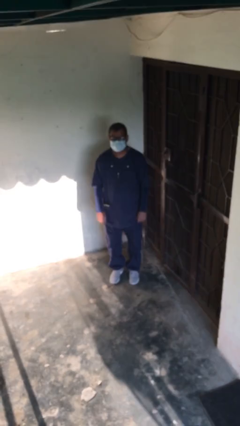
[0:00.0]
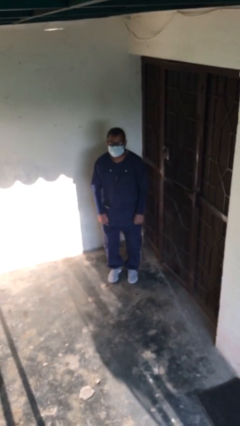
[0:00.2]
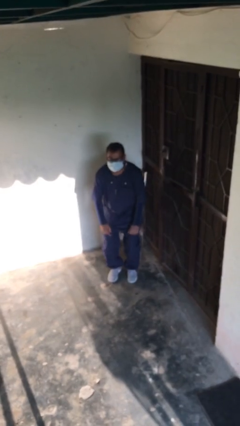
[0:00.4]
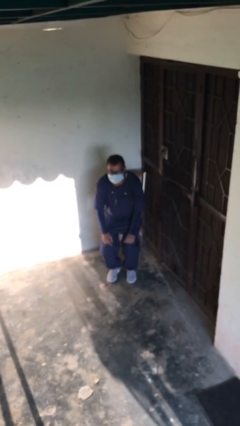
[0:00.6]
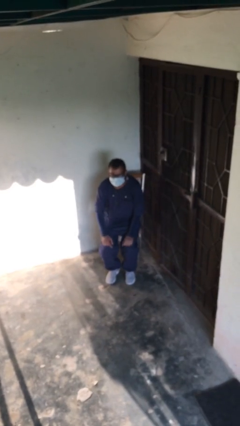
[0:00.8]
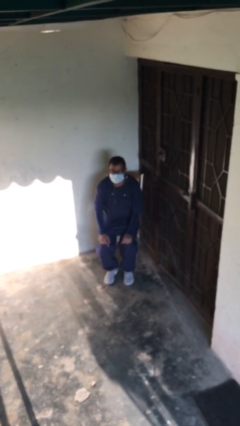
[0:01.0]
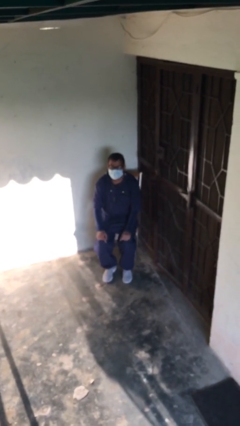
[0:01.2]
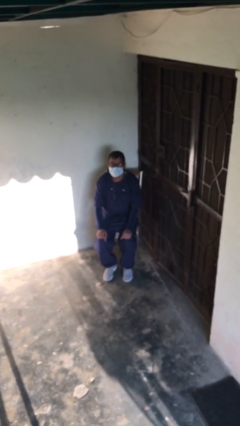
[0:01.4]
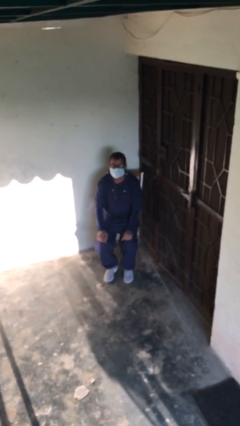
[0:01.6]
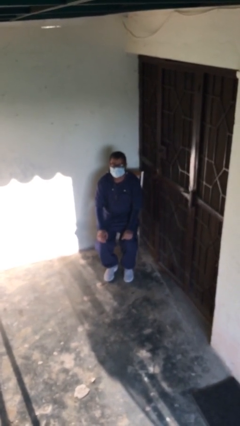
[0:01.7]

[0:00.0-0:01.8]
person sits down

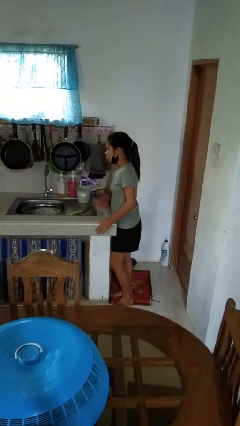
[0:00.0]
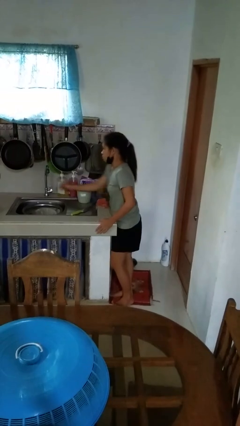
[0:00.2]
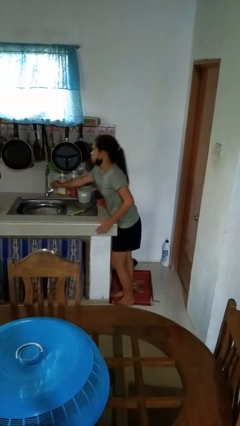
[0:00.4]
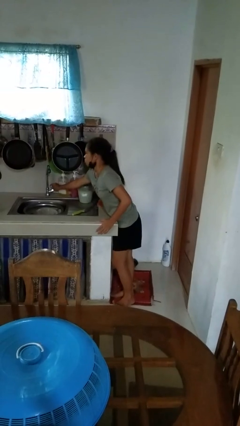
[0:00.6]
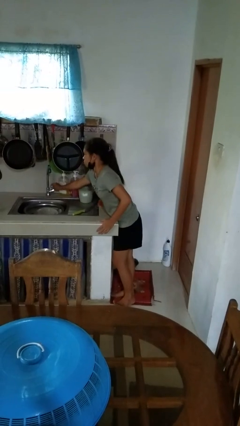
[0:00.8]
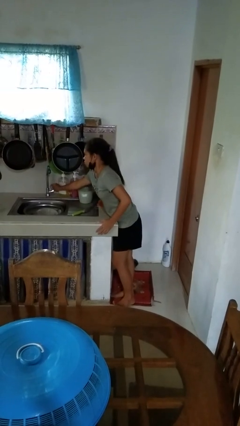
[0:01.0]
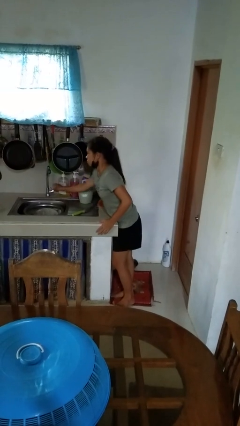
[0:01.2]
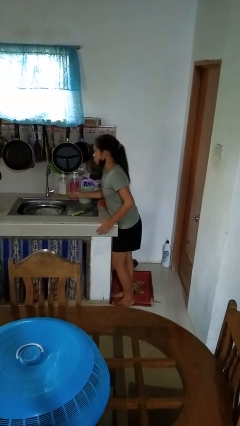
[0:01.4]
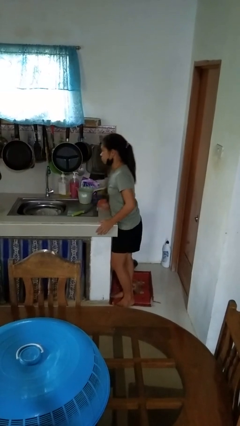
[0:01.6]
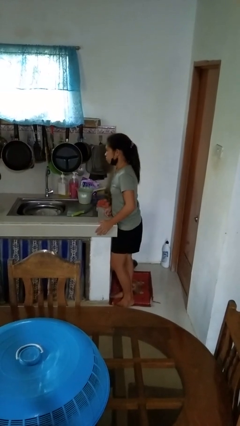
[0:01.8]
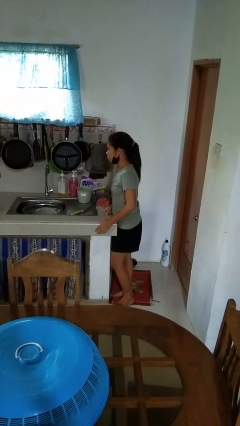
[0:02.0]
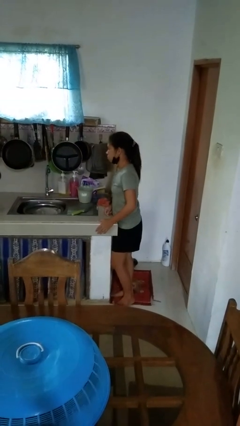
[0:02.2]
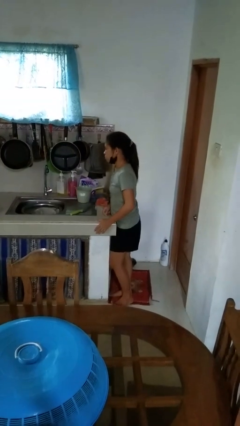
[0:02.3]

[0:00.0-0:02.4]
person turns on faucet

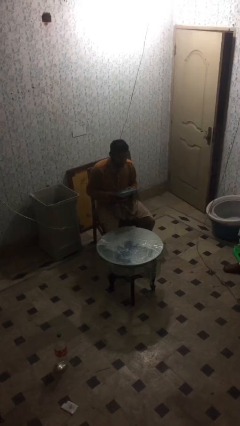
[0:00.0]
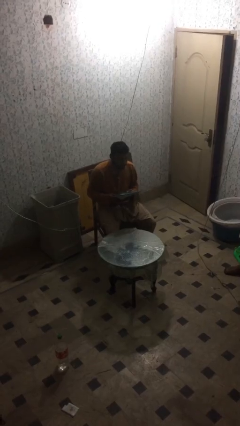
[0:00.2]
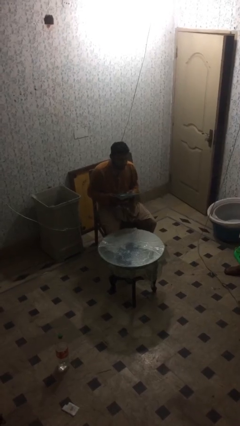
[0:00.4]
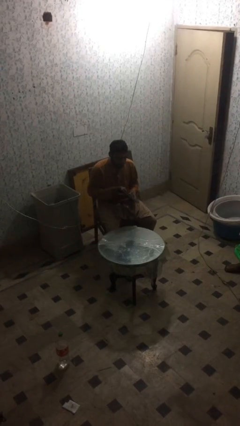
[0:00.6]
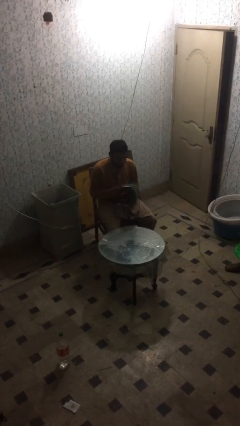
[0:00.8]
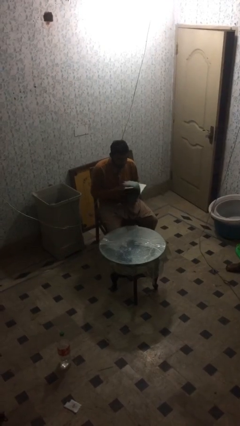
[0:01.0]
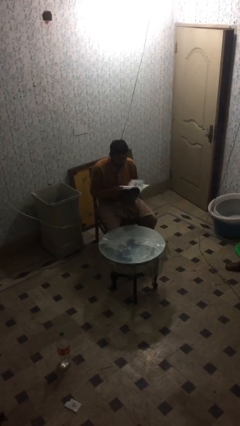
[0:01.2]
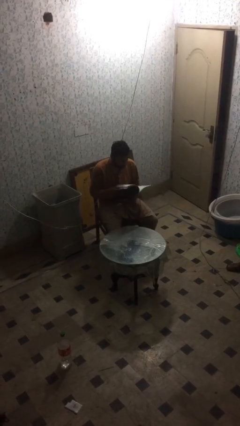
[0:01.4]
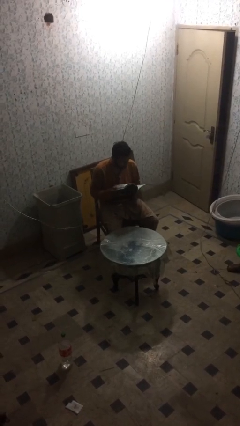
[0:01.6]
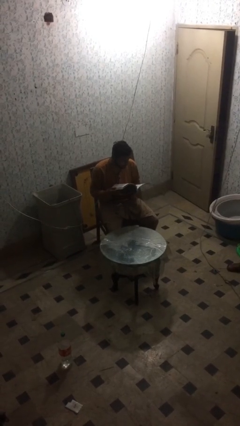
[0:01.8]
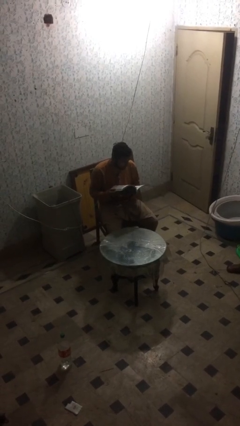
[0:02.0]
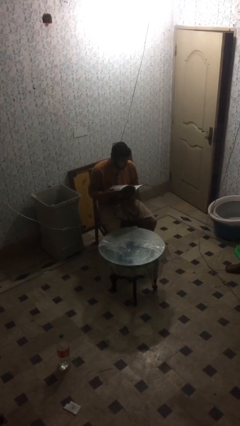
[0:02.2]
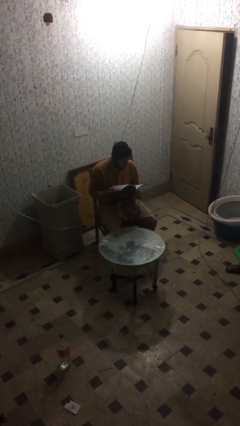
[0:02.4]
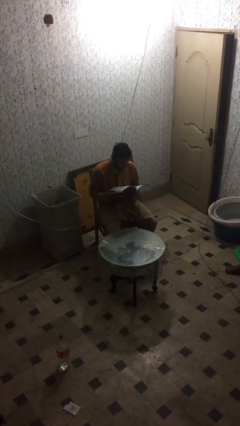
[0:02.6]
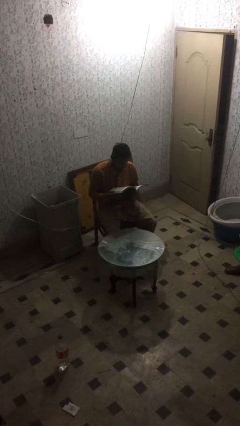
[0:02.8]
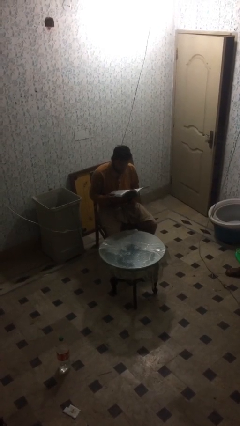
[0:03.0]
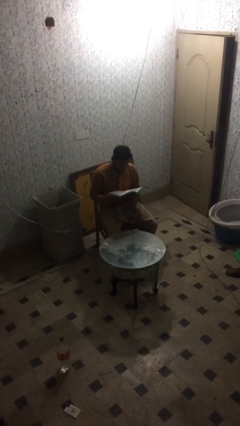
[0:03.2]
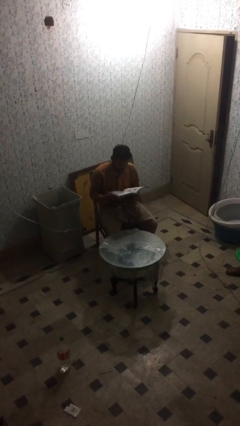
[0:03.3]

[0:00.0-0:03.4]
person reads document

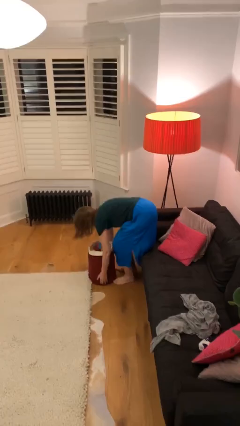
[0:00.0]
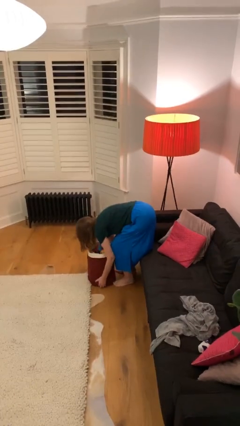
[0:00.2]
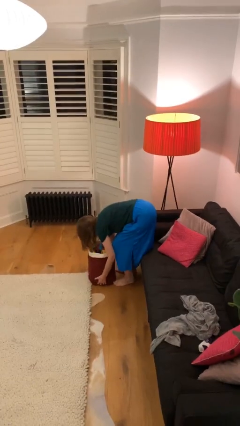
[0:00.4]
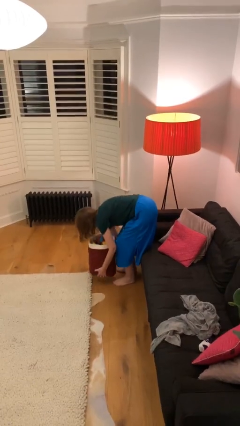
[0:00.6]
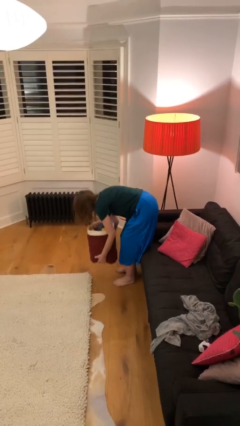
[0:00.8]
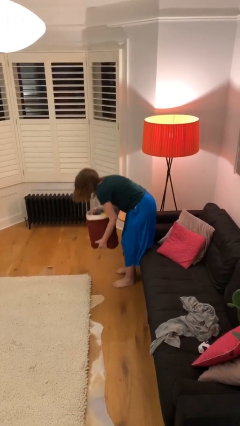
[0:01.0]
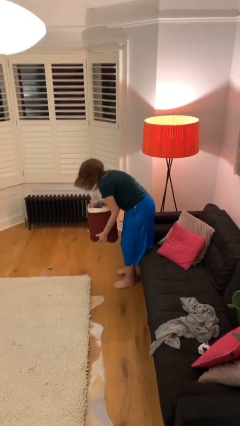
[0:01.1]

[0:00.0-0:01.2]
person picks up object from floor

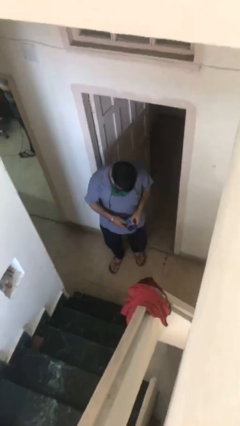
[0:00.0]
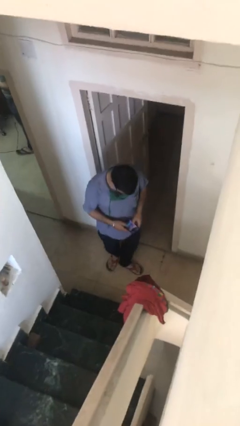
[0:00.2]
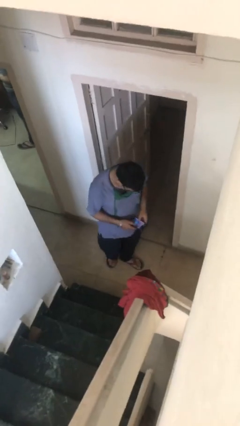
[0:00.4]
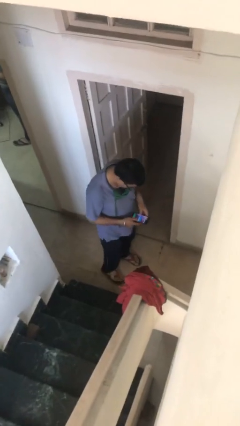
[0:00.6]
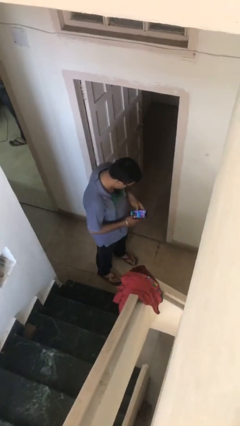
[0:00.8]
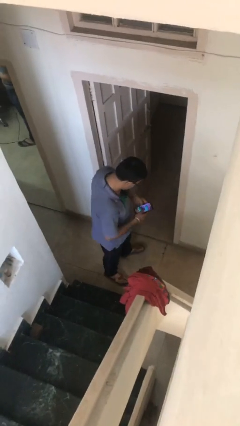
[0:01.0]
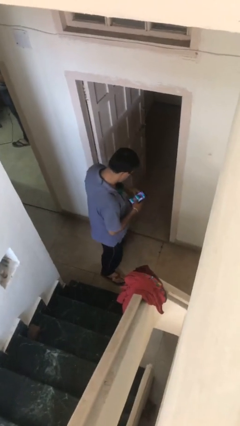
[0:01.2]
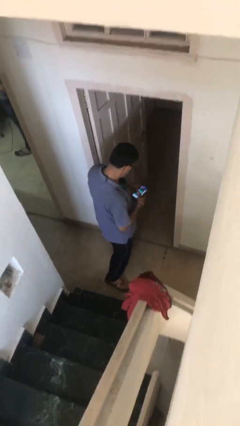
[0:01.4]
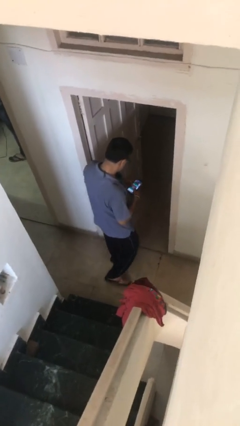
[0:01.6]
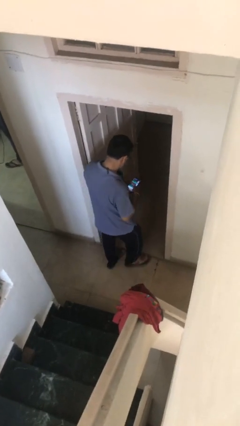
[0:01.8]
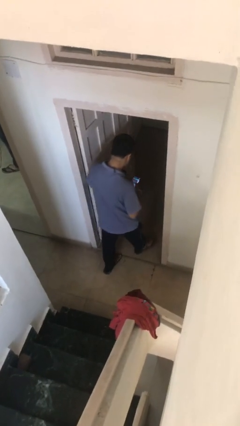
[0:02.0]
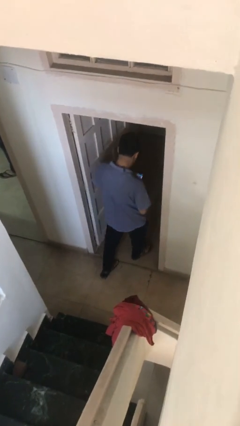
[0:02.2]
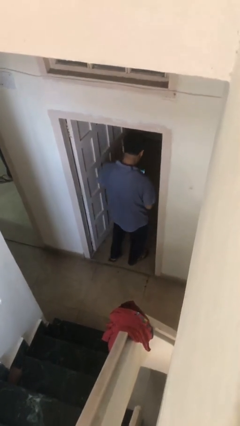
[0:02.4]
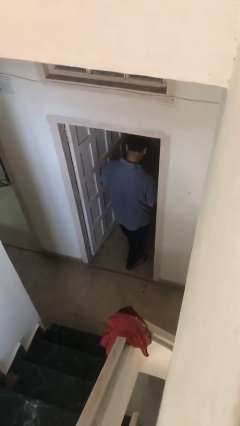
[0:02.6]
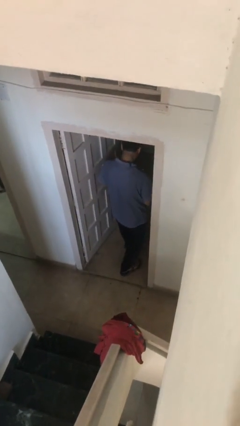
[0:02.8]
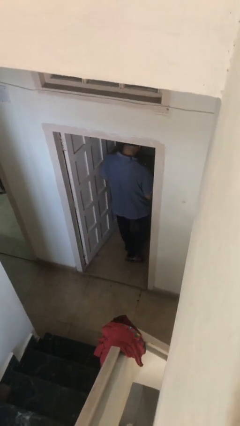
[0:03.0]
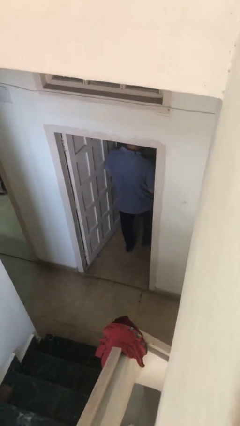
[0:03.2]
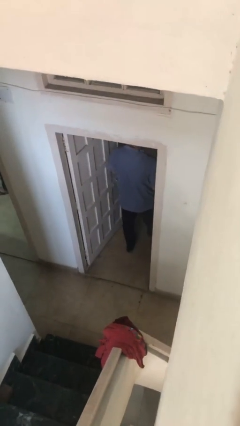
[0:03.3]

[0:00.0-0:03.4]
person exits scene through structure

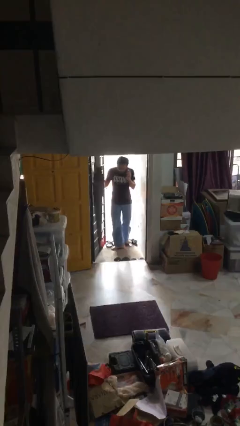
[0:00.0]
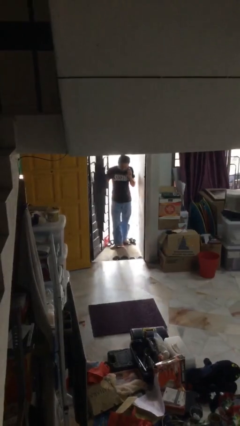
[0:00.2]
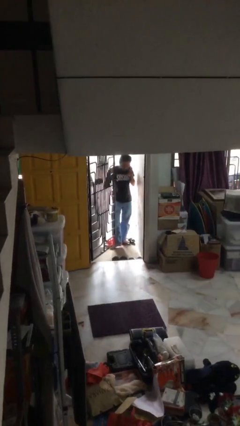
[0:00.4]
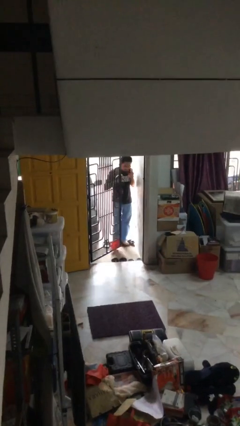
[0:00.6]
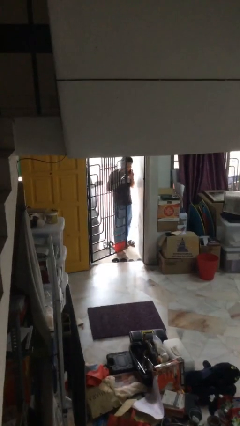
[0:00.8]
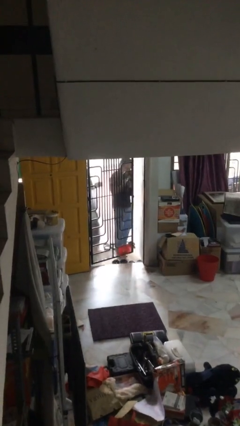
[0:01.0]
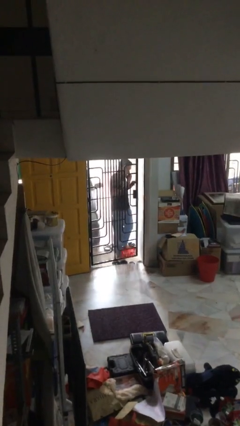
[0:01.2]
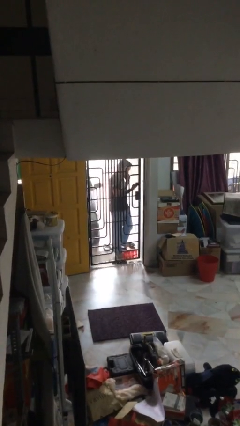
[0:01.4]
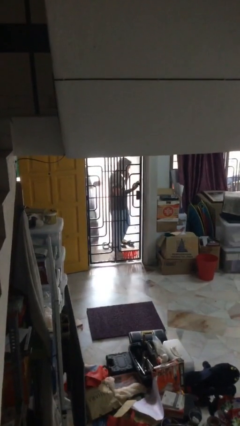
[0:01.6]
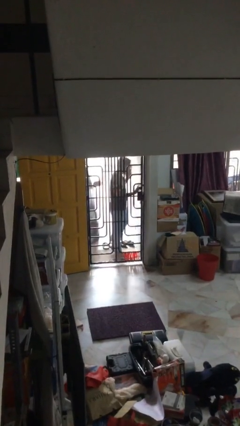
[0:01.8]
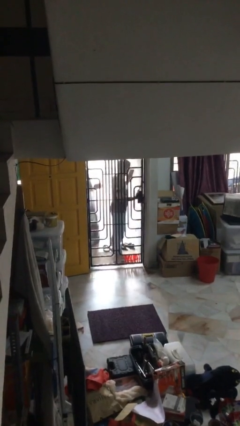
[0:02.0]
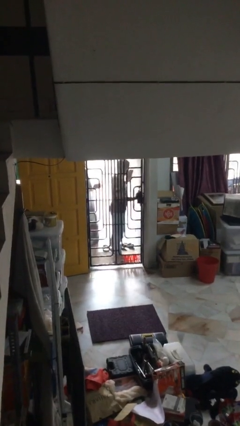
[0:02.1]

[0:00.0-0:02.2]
person closes facility door

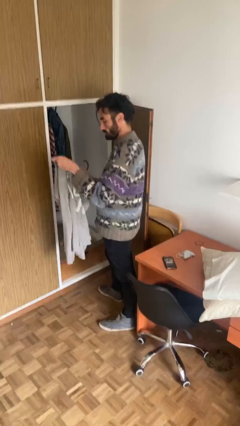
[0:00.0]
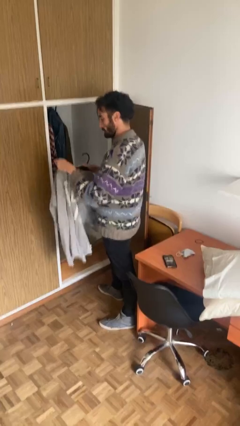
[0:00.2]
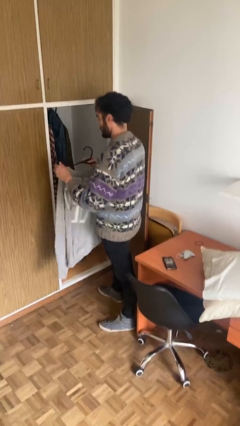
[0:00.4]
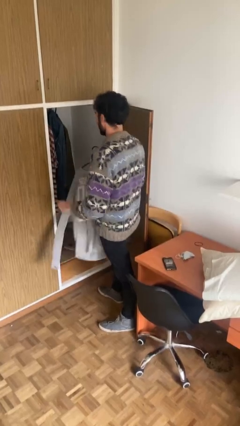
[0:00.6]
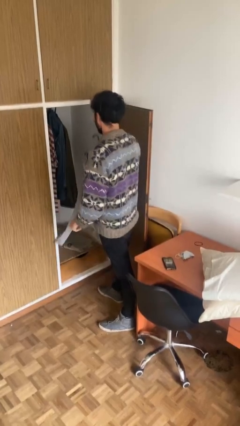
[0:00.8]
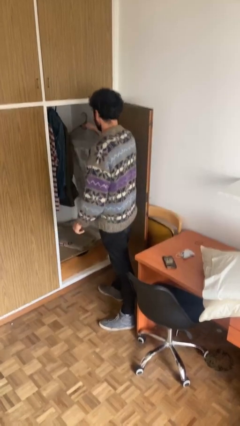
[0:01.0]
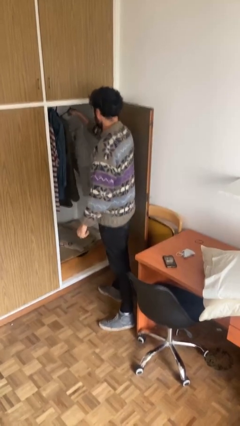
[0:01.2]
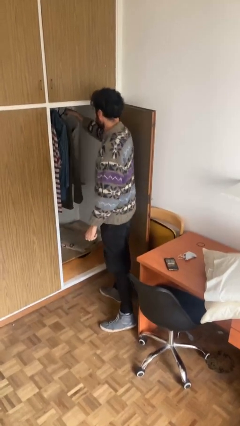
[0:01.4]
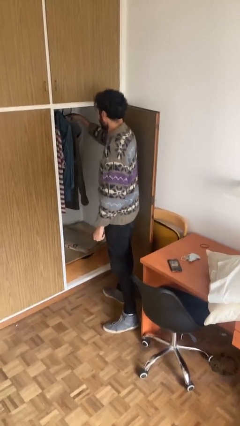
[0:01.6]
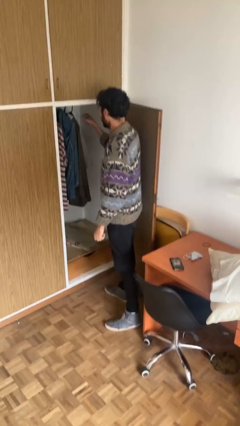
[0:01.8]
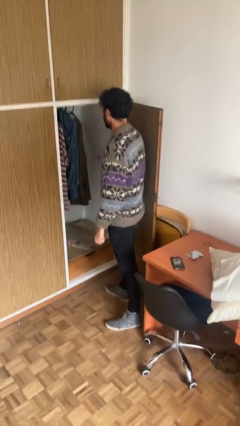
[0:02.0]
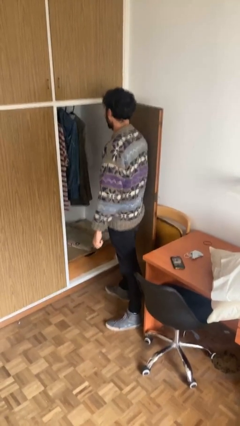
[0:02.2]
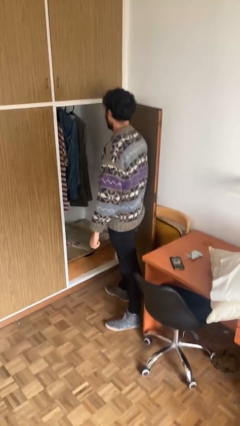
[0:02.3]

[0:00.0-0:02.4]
person puts clothes into closet
